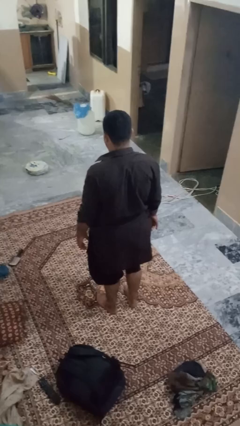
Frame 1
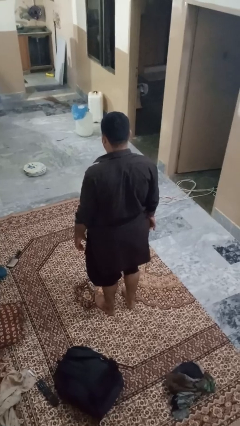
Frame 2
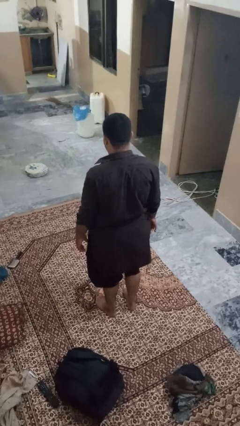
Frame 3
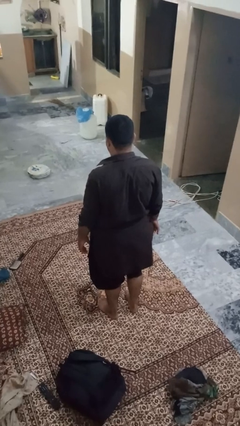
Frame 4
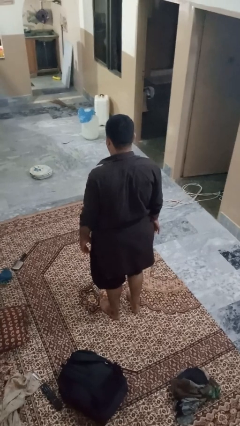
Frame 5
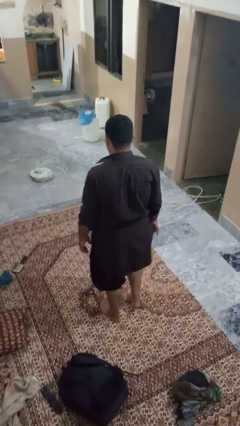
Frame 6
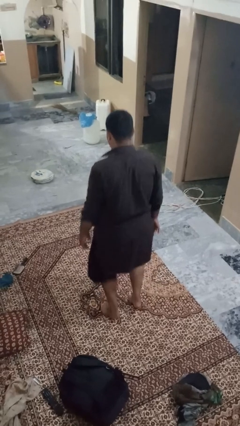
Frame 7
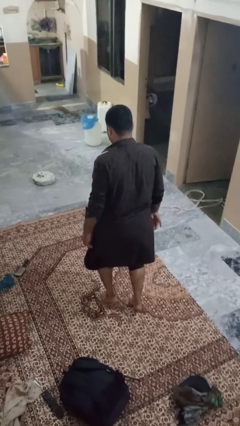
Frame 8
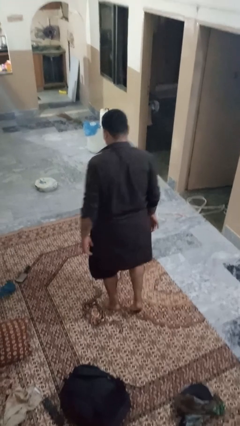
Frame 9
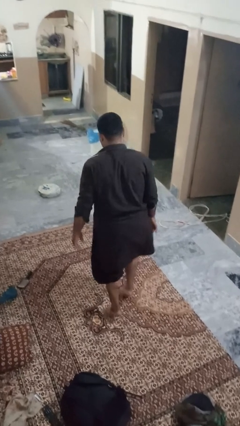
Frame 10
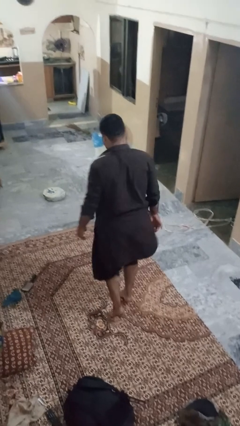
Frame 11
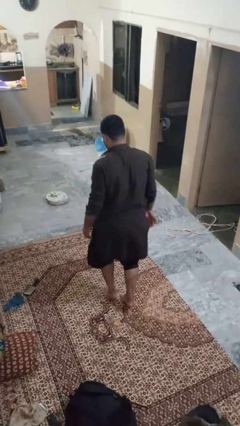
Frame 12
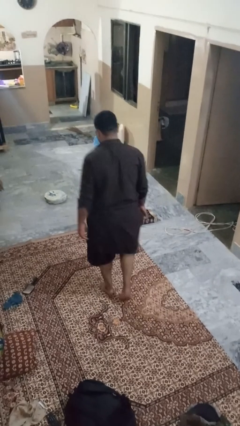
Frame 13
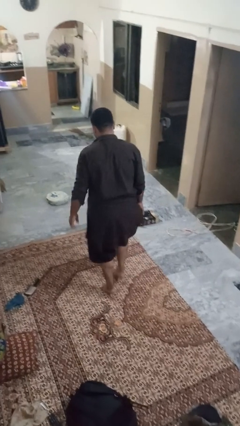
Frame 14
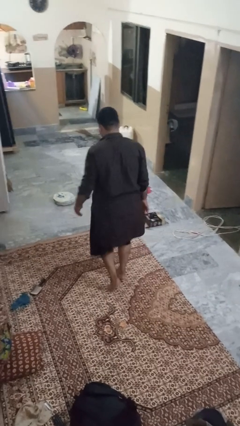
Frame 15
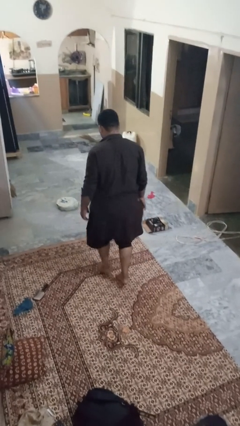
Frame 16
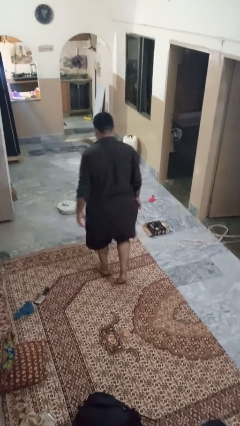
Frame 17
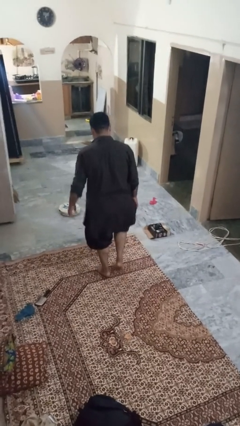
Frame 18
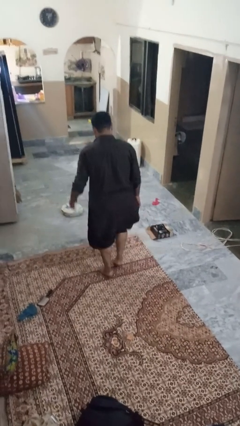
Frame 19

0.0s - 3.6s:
person walks tiptoe

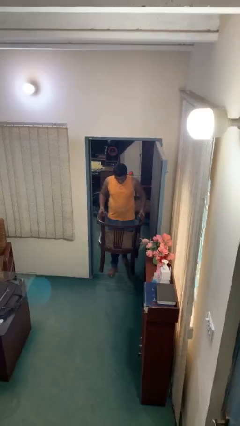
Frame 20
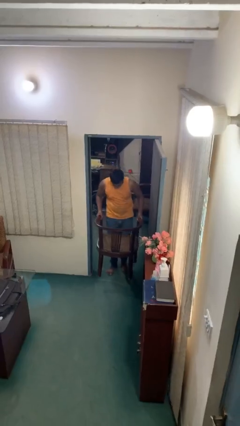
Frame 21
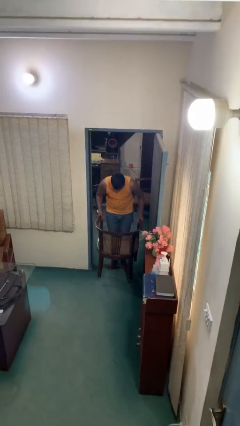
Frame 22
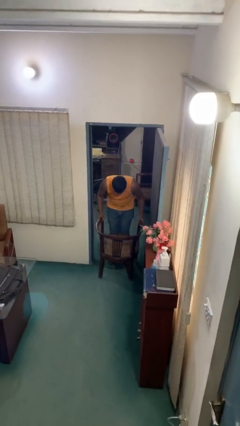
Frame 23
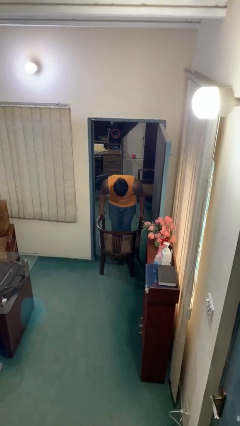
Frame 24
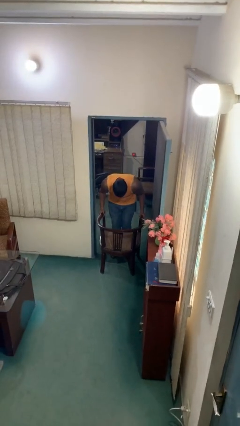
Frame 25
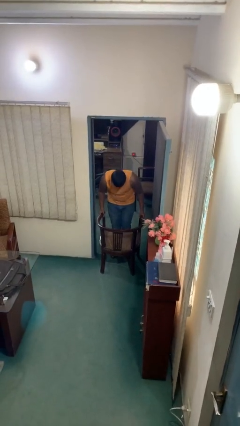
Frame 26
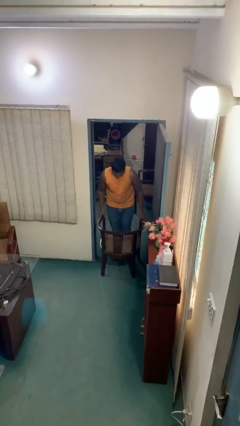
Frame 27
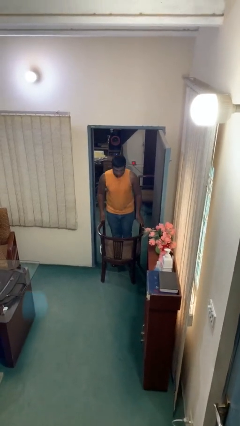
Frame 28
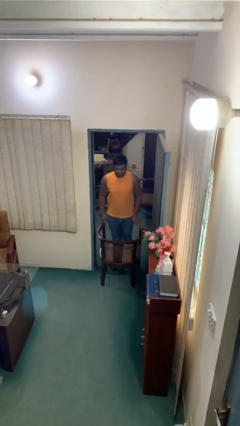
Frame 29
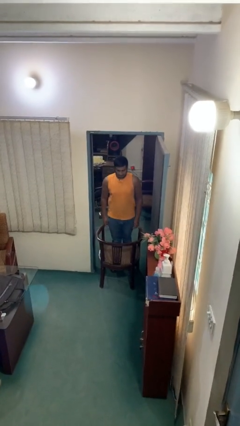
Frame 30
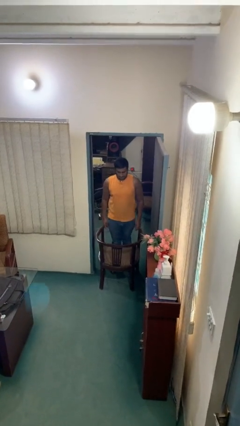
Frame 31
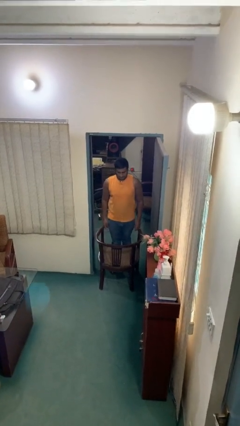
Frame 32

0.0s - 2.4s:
person puts down object on floor

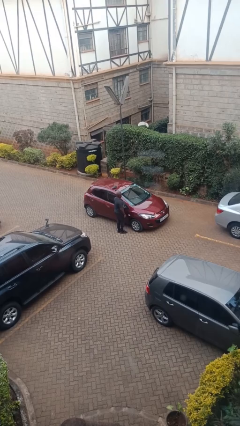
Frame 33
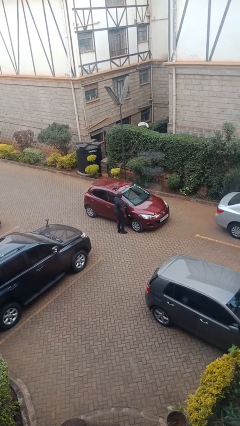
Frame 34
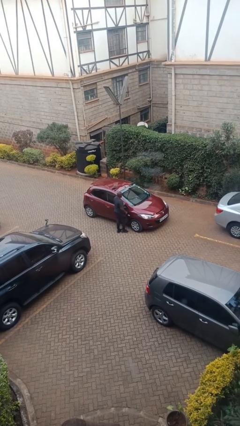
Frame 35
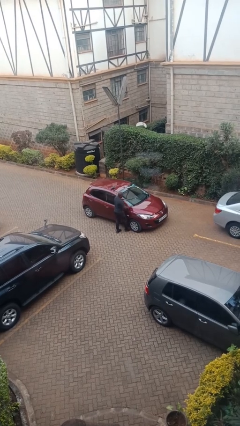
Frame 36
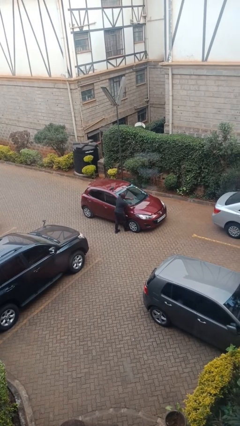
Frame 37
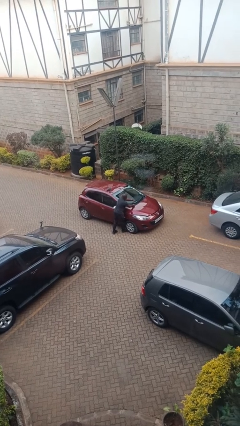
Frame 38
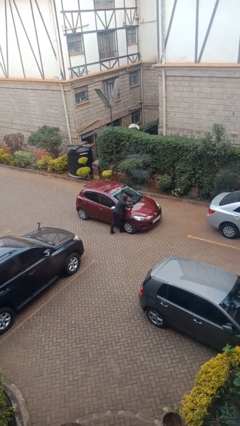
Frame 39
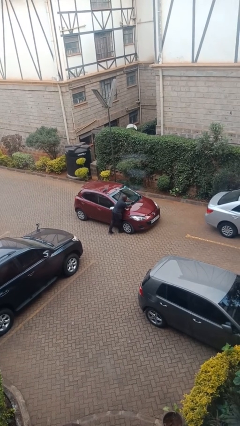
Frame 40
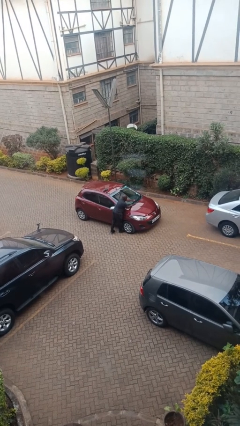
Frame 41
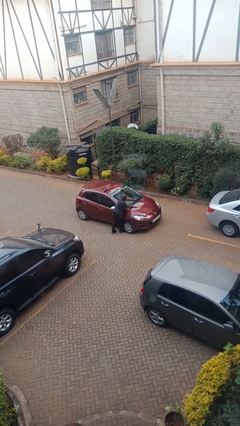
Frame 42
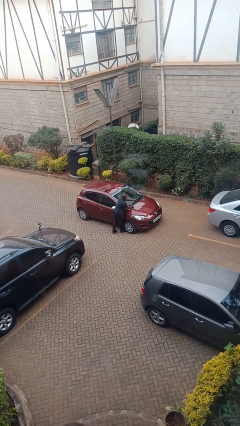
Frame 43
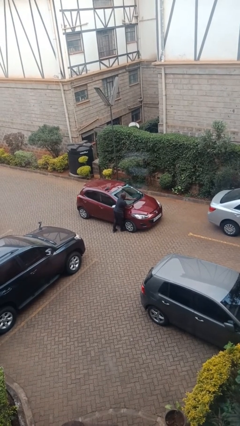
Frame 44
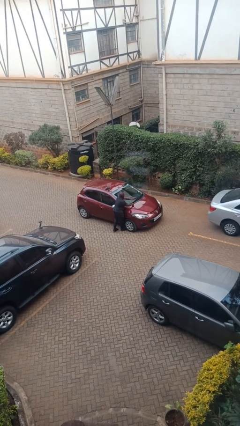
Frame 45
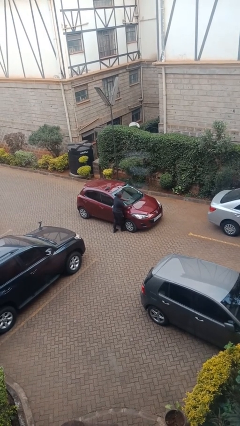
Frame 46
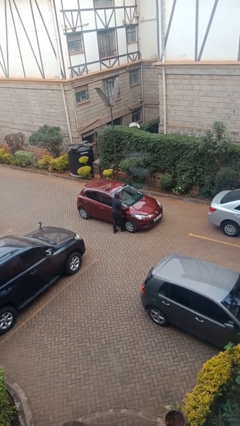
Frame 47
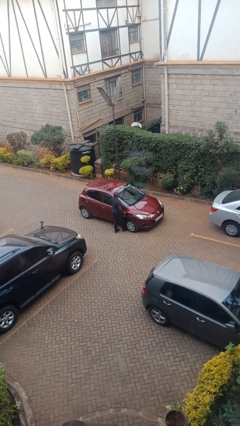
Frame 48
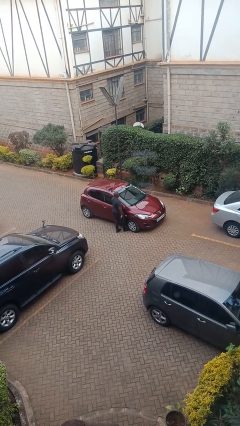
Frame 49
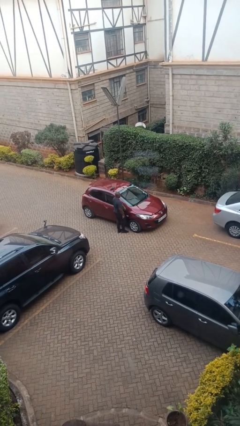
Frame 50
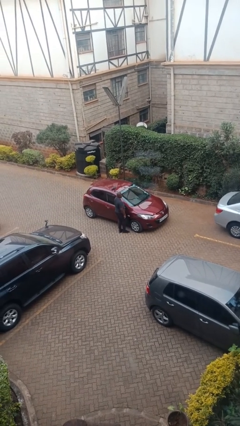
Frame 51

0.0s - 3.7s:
person flips up car wipers

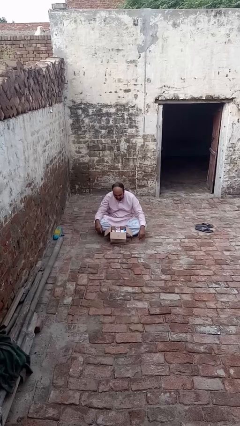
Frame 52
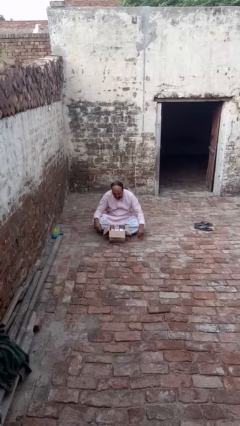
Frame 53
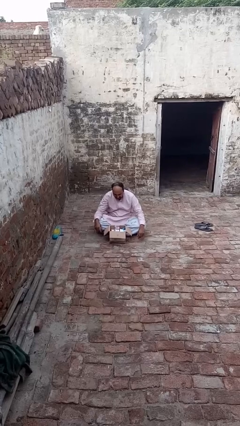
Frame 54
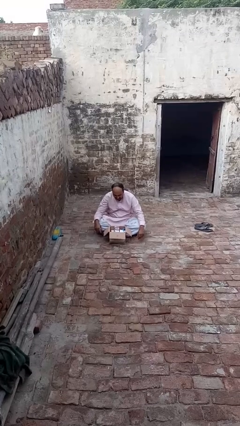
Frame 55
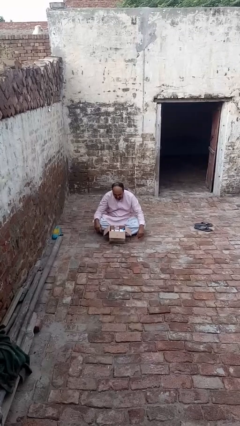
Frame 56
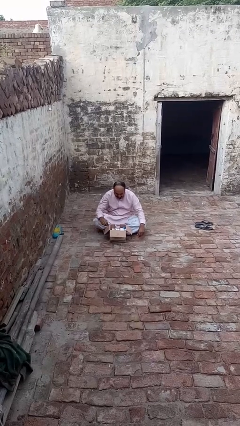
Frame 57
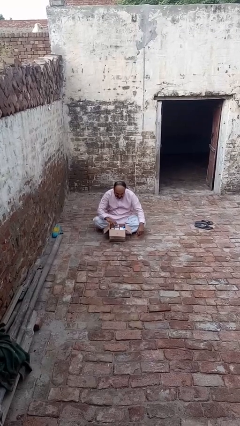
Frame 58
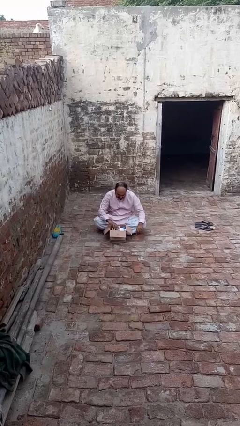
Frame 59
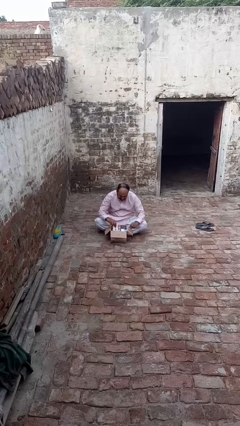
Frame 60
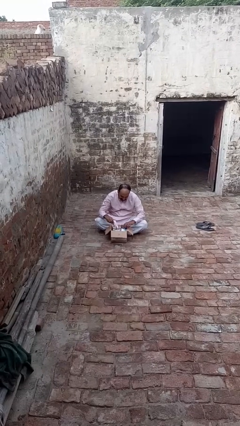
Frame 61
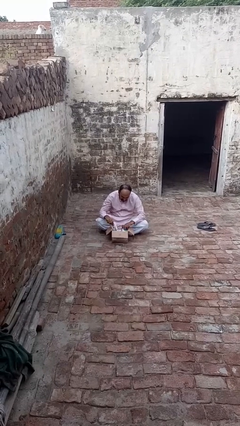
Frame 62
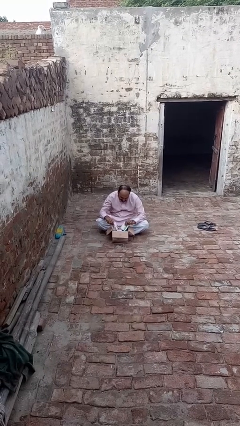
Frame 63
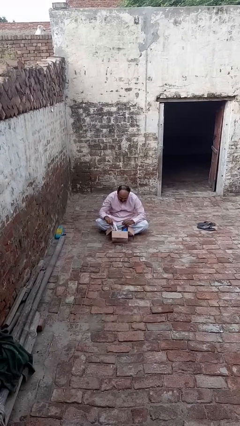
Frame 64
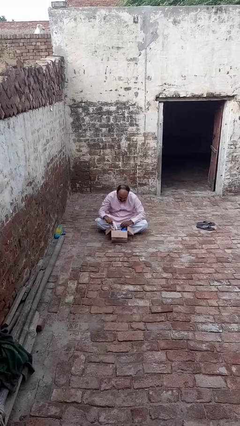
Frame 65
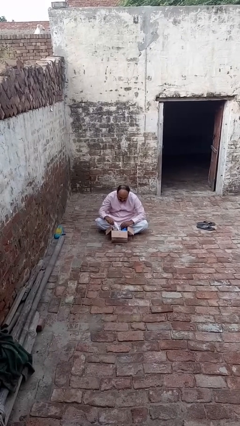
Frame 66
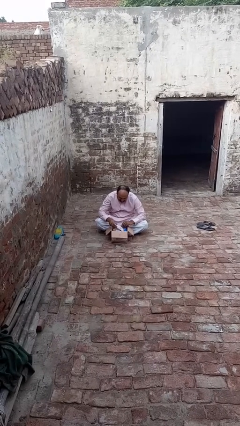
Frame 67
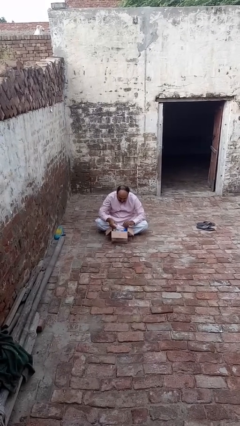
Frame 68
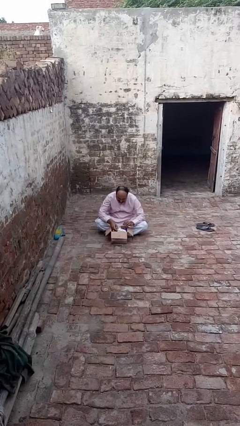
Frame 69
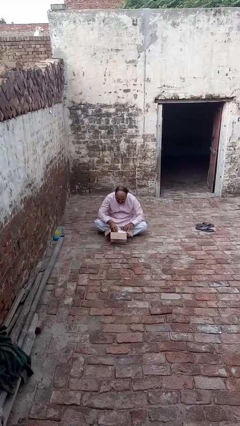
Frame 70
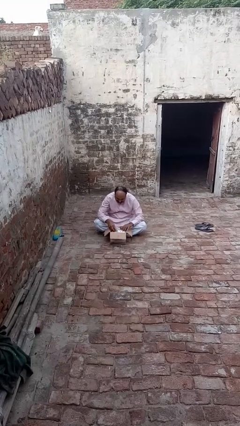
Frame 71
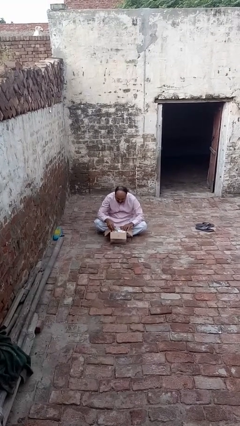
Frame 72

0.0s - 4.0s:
person searches in box

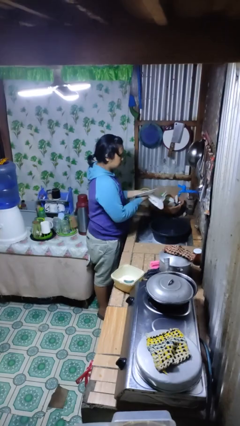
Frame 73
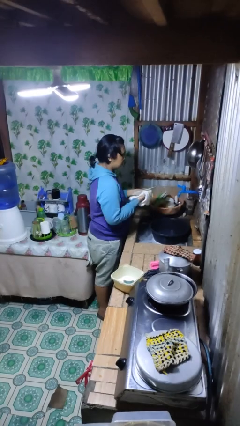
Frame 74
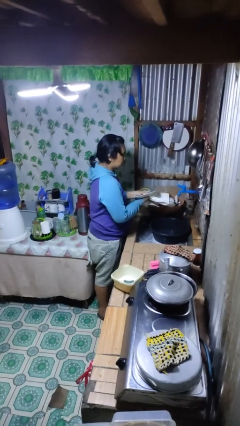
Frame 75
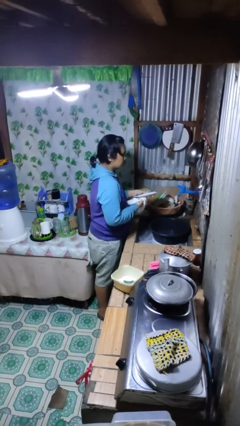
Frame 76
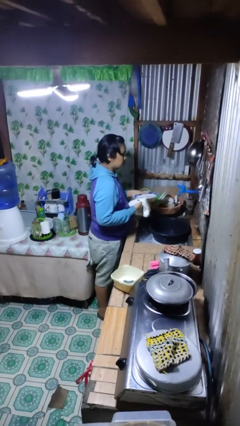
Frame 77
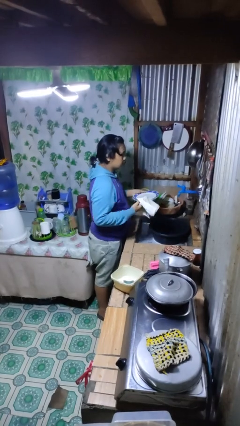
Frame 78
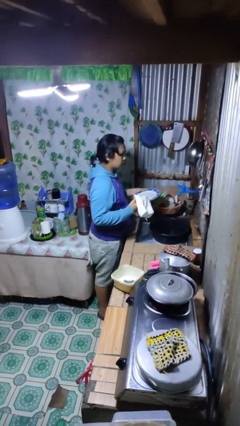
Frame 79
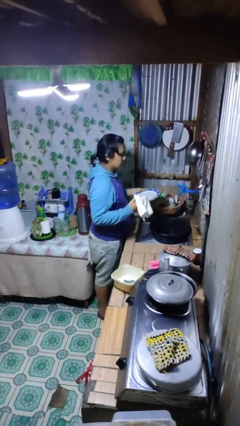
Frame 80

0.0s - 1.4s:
person dries dish

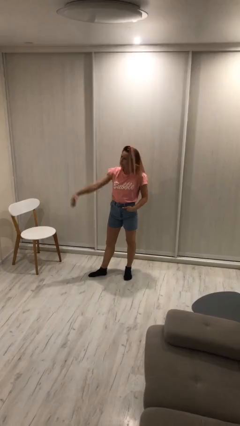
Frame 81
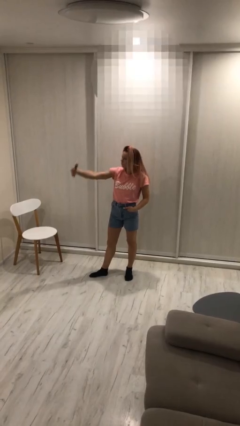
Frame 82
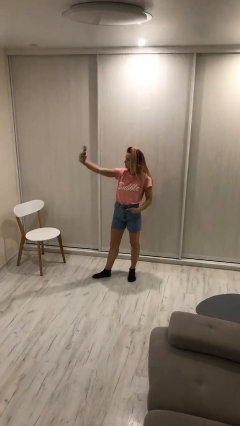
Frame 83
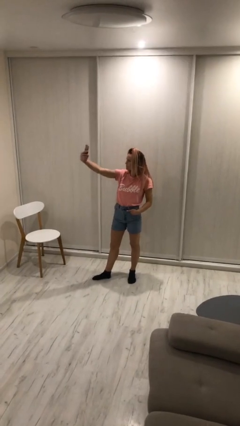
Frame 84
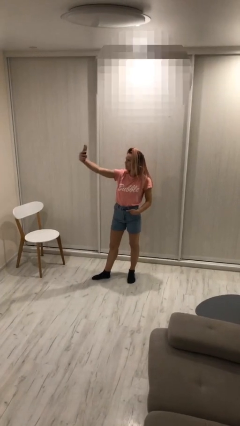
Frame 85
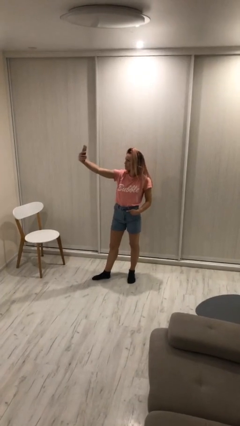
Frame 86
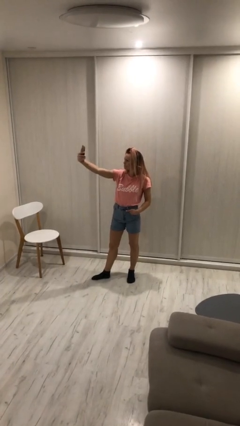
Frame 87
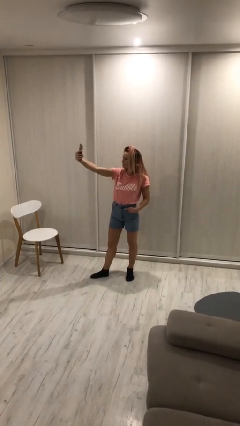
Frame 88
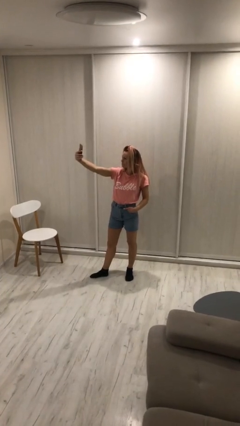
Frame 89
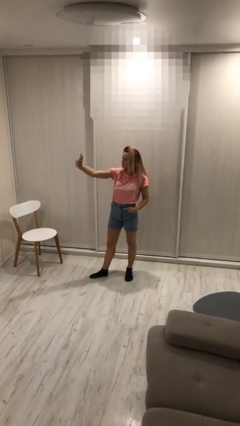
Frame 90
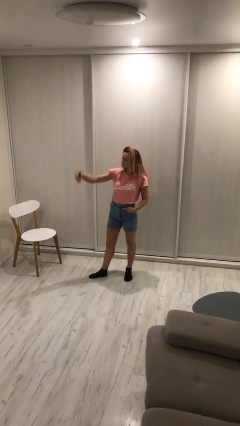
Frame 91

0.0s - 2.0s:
person takes selfie
